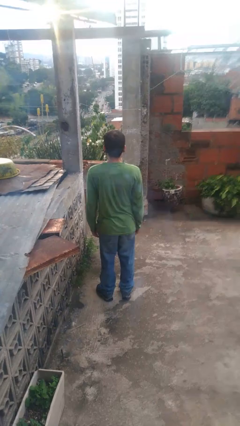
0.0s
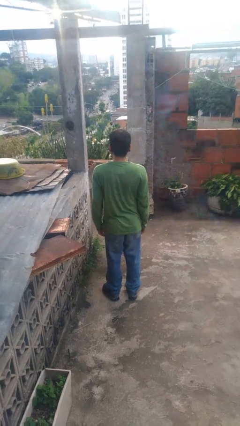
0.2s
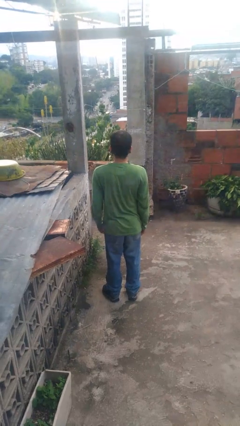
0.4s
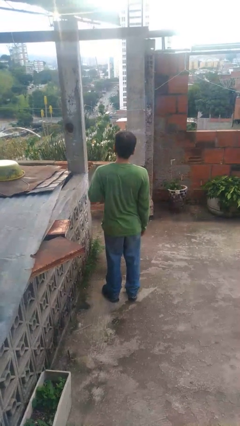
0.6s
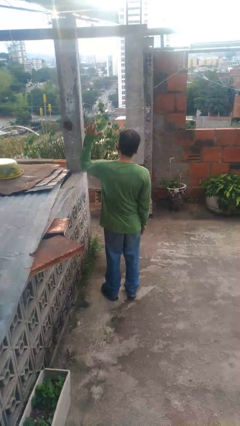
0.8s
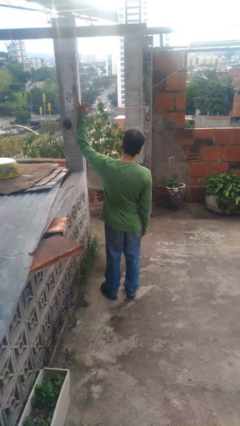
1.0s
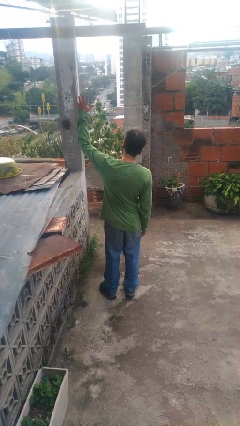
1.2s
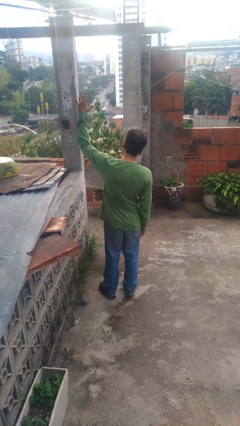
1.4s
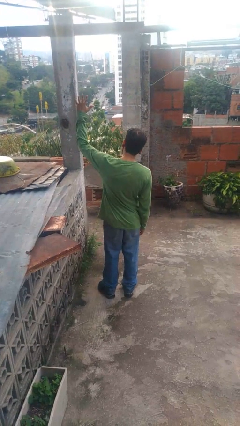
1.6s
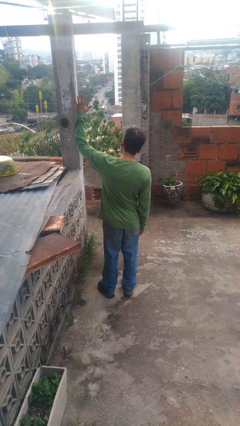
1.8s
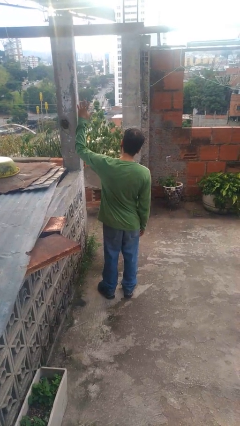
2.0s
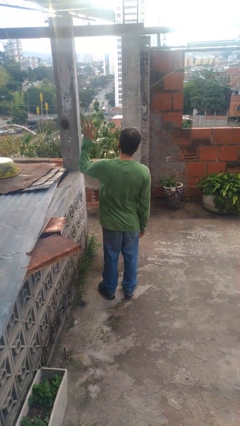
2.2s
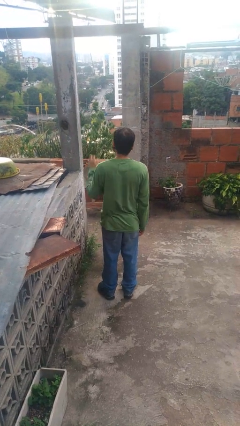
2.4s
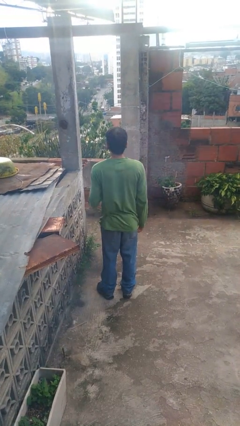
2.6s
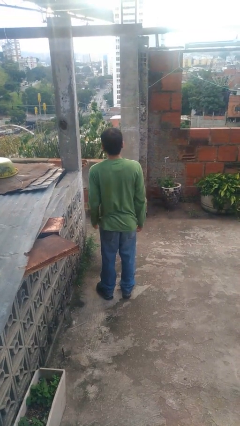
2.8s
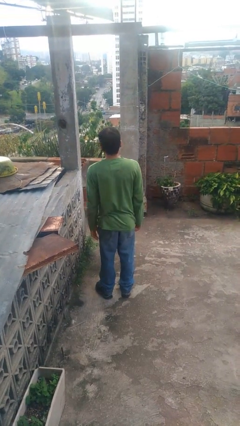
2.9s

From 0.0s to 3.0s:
person gestures number five

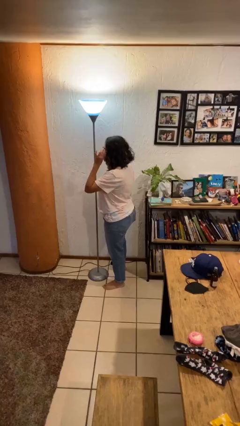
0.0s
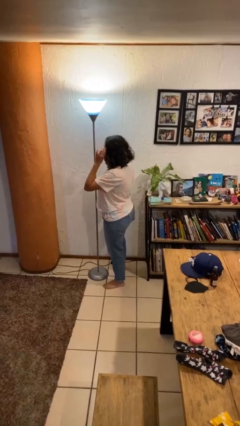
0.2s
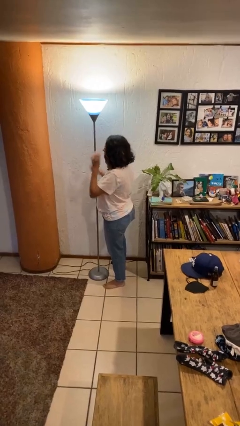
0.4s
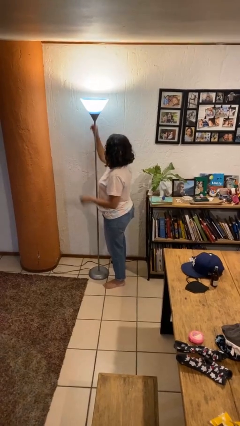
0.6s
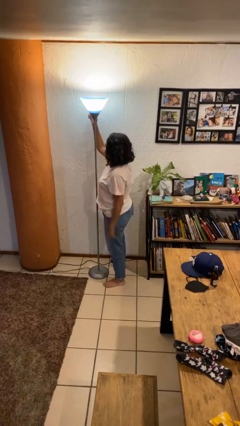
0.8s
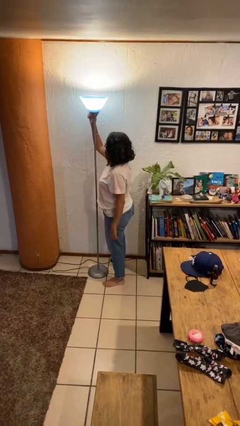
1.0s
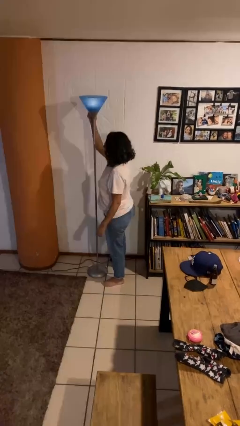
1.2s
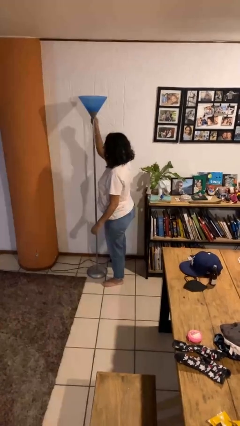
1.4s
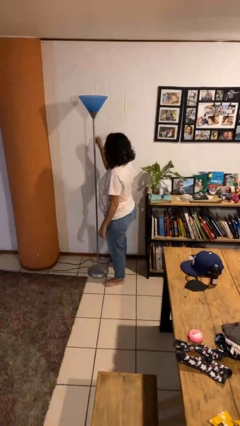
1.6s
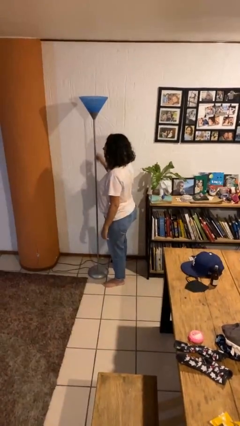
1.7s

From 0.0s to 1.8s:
person turns off lamp

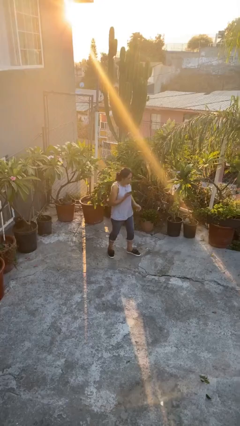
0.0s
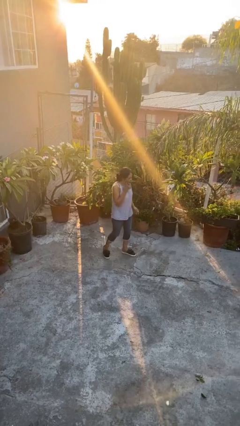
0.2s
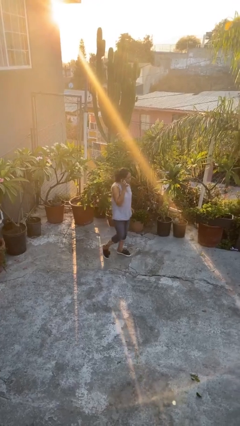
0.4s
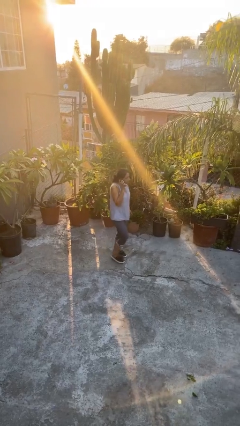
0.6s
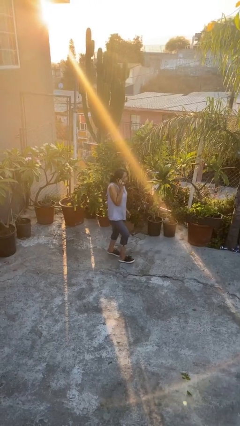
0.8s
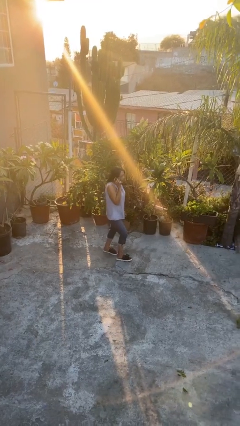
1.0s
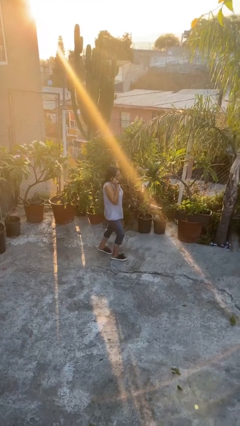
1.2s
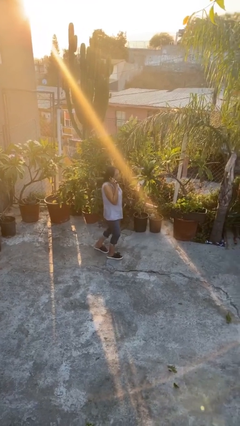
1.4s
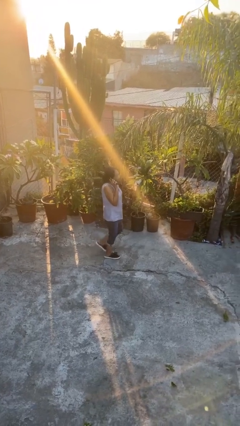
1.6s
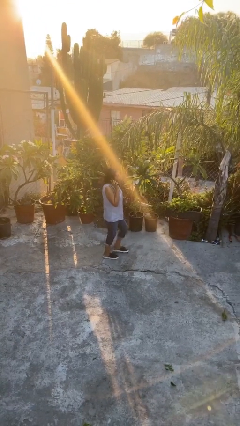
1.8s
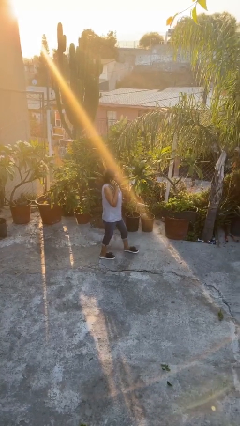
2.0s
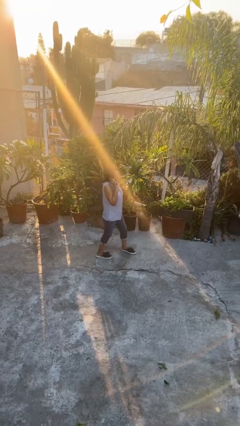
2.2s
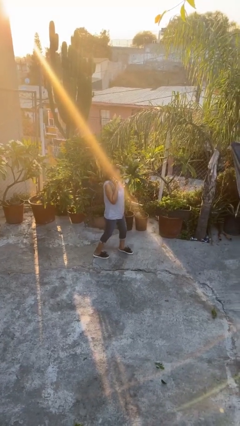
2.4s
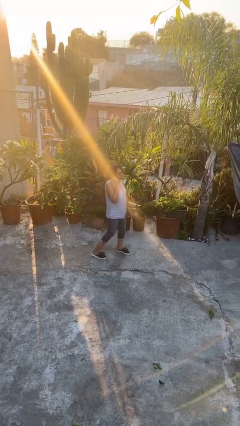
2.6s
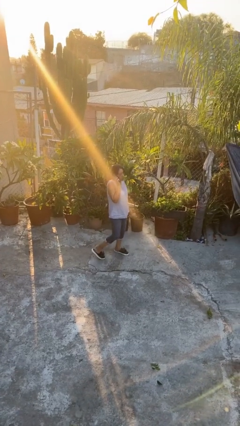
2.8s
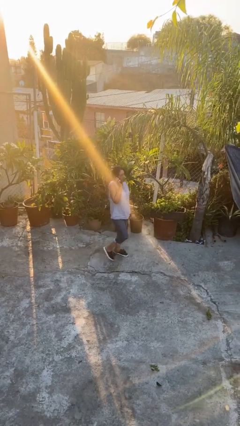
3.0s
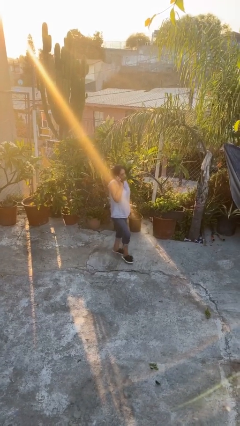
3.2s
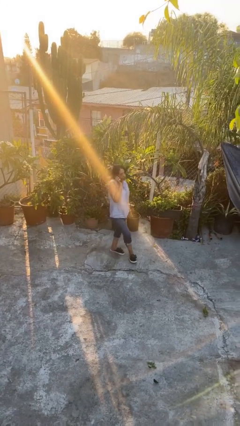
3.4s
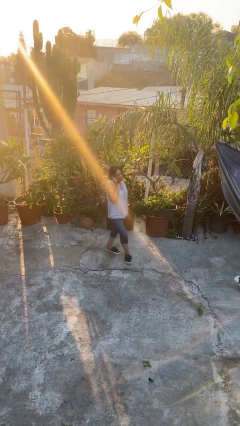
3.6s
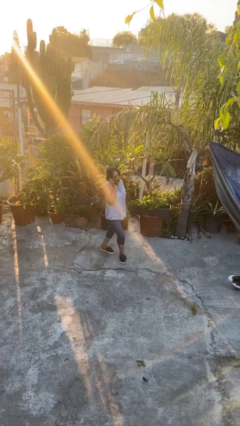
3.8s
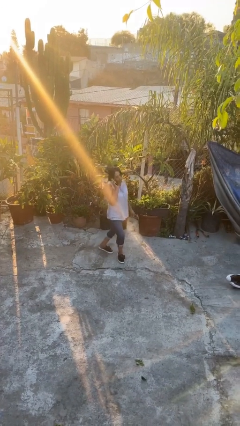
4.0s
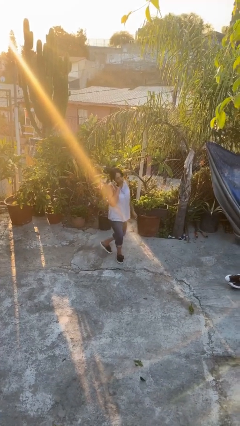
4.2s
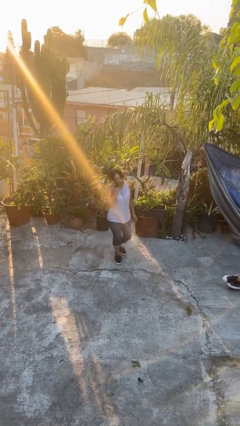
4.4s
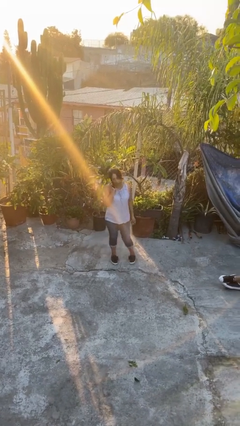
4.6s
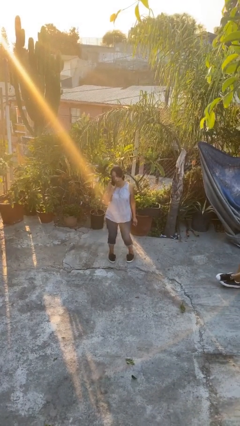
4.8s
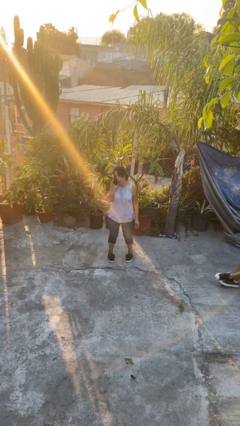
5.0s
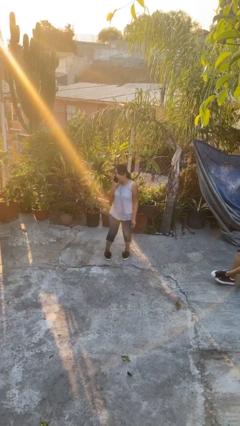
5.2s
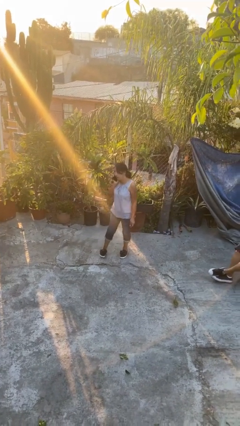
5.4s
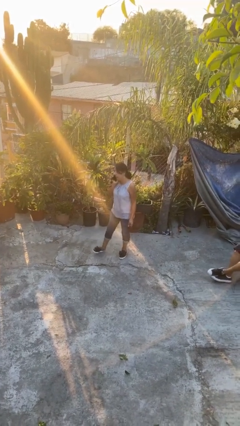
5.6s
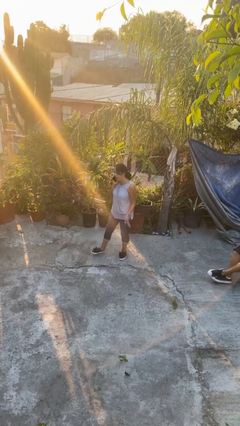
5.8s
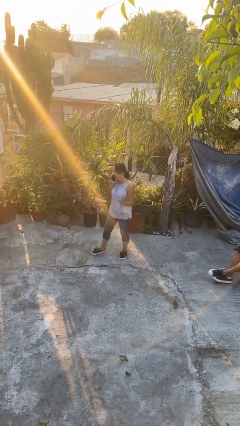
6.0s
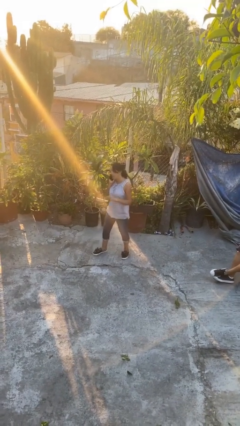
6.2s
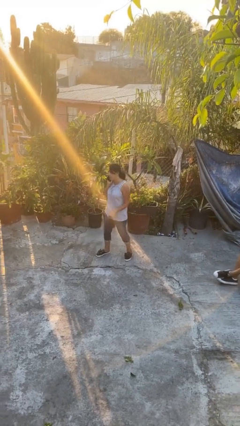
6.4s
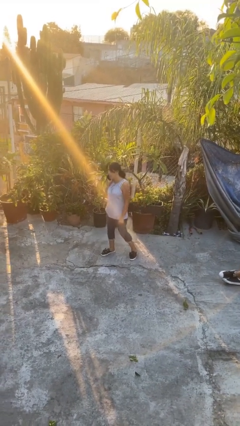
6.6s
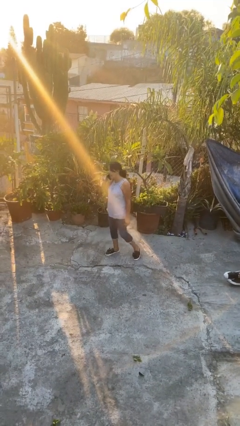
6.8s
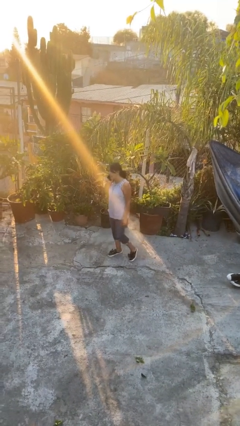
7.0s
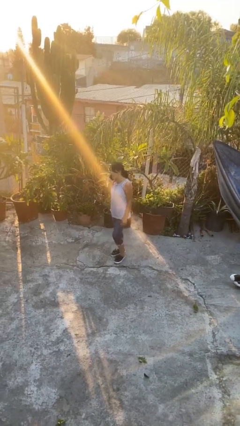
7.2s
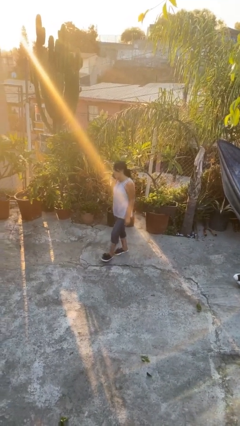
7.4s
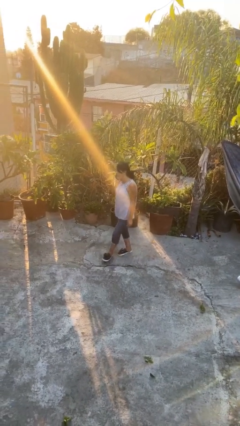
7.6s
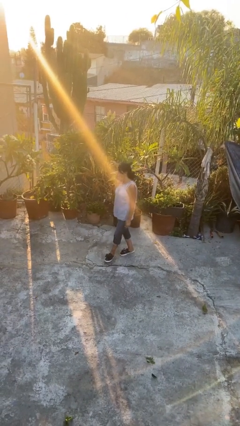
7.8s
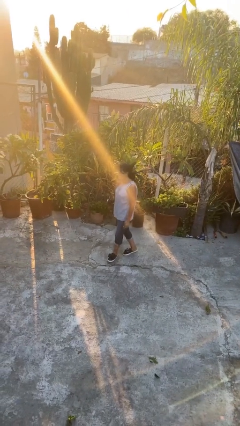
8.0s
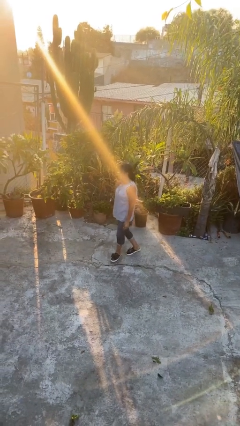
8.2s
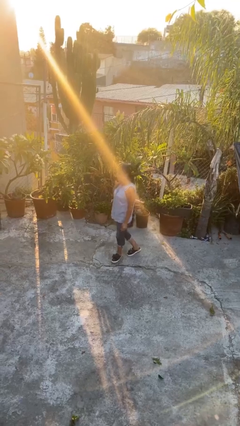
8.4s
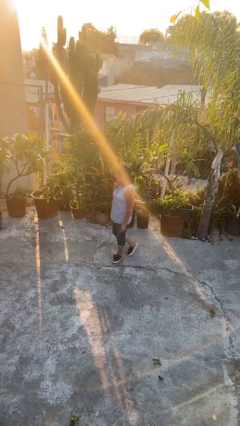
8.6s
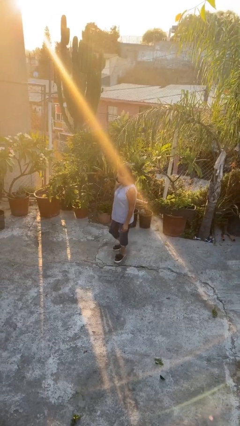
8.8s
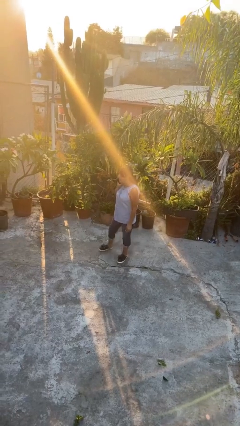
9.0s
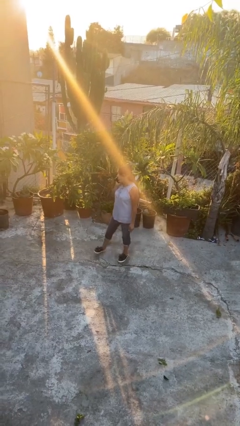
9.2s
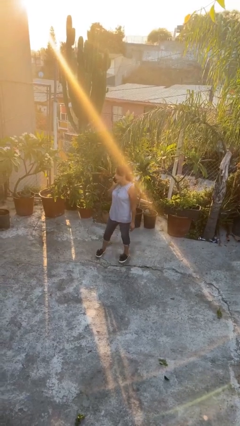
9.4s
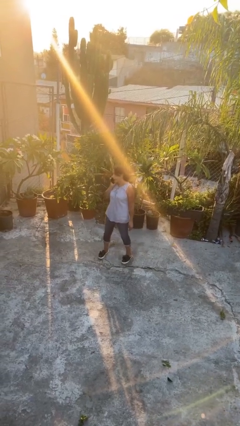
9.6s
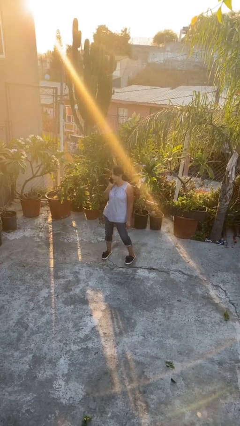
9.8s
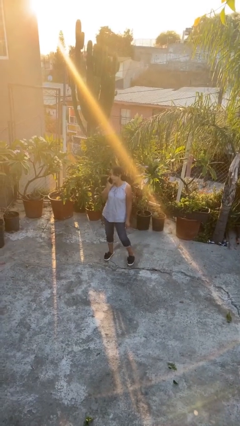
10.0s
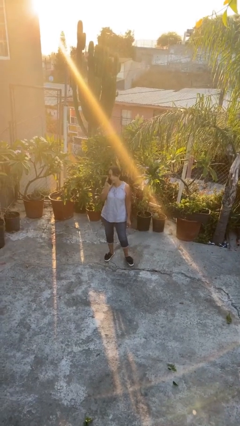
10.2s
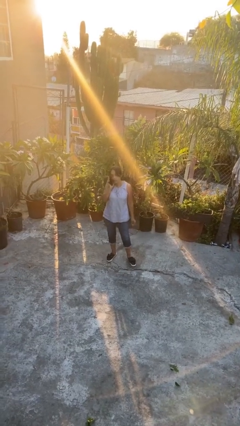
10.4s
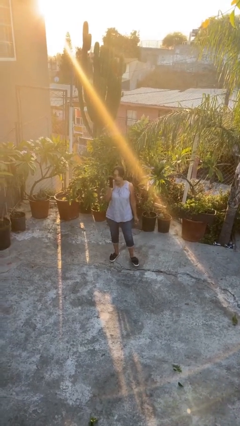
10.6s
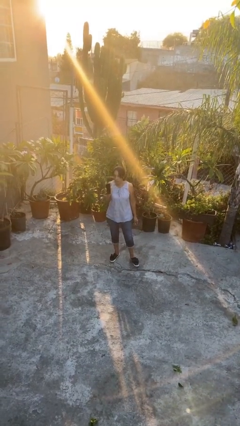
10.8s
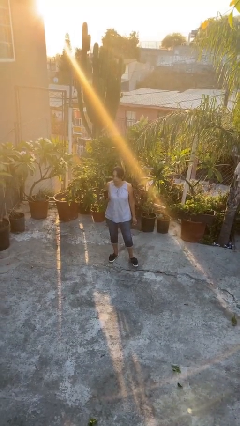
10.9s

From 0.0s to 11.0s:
person talks on phone

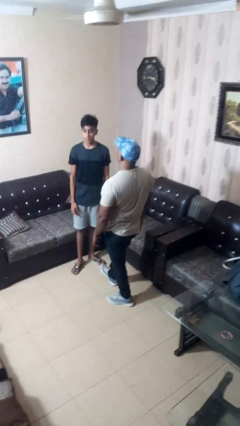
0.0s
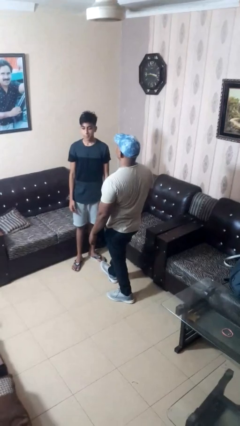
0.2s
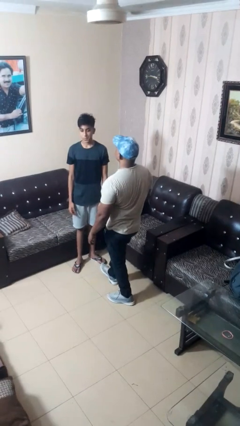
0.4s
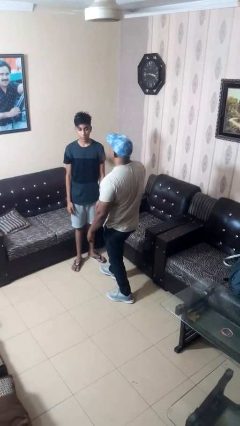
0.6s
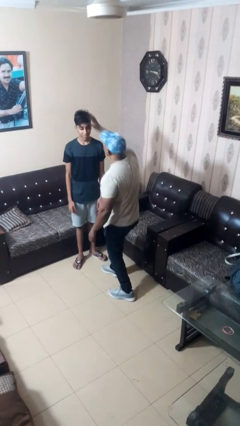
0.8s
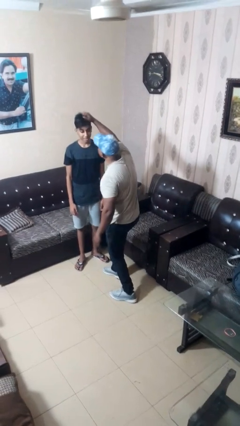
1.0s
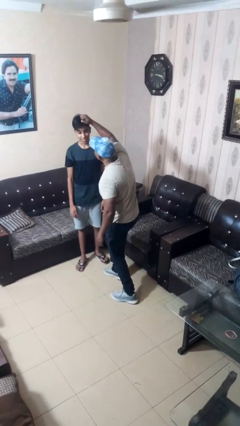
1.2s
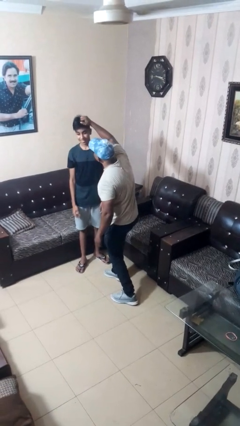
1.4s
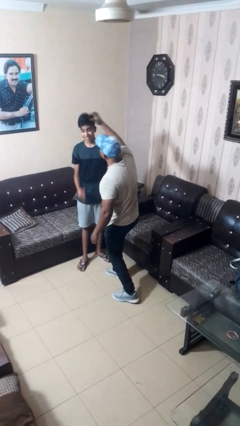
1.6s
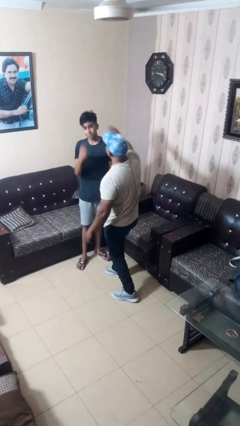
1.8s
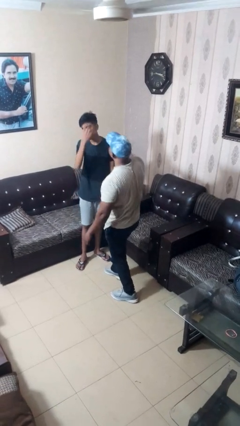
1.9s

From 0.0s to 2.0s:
person grabs person by hair

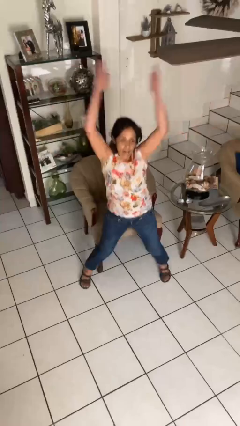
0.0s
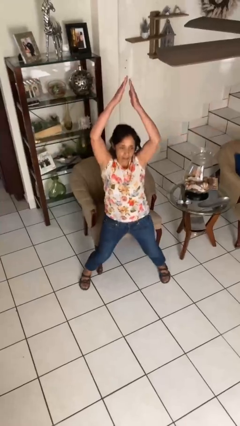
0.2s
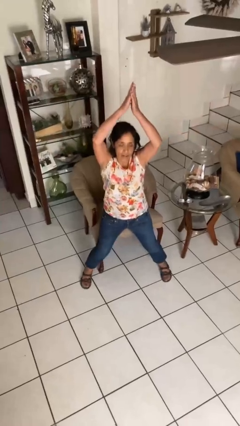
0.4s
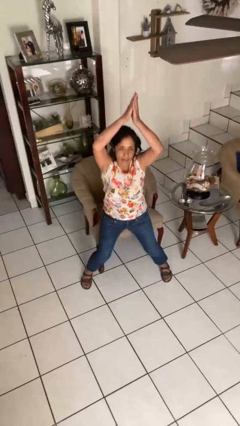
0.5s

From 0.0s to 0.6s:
person exercises with jumping jacks
